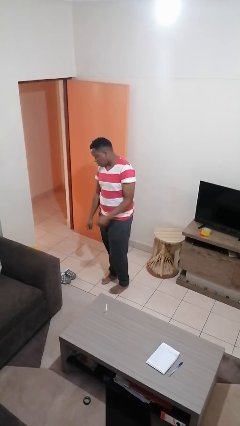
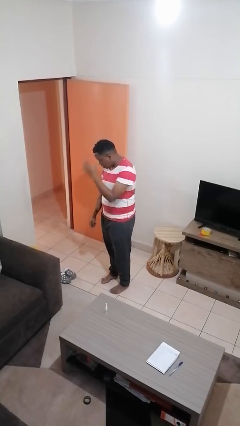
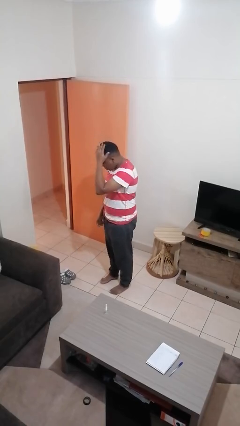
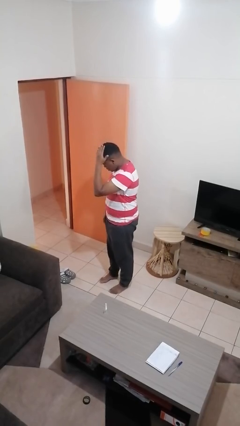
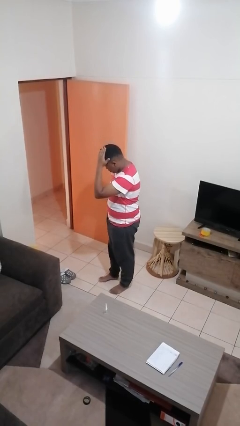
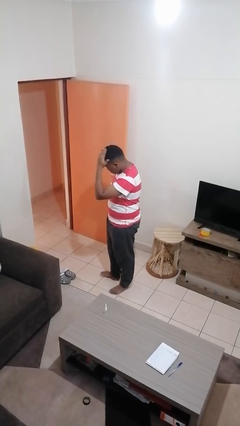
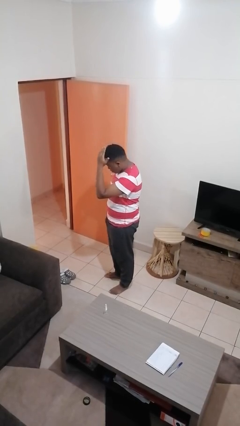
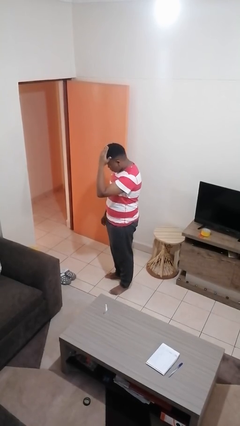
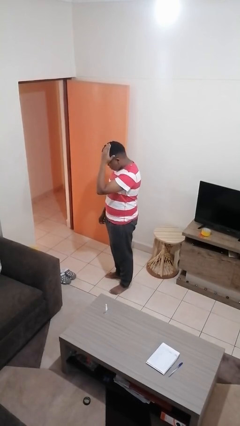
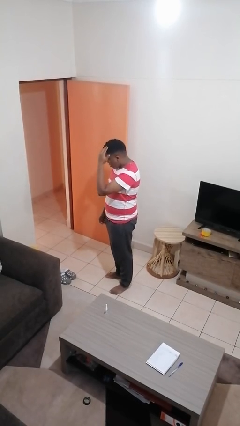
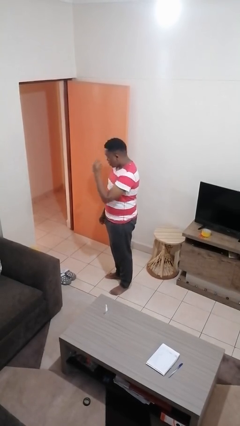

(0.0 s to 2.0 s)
person pats head

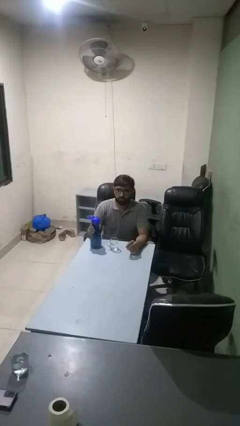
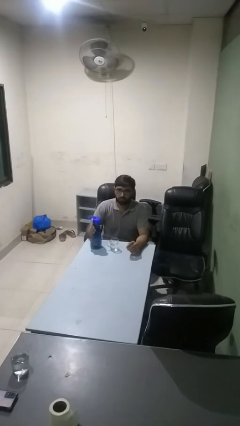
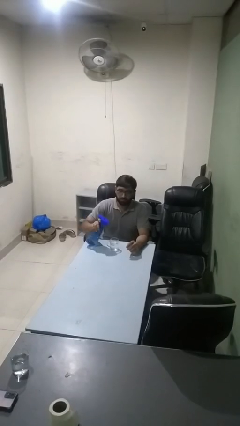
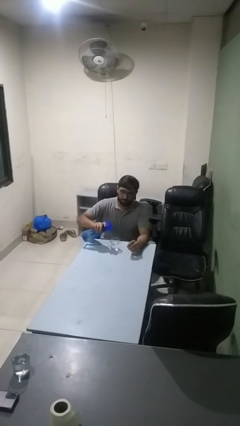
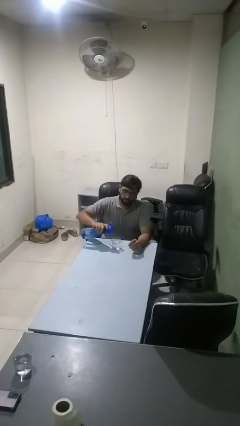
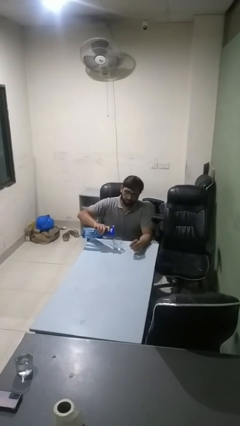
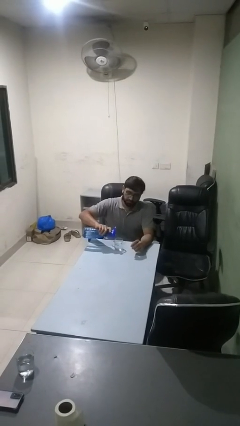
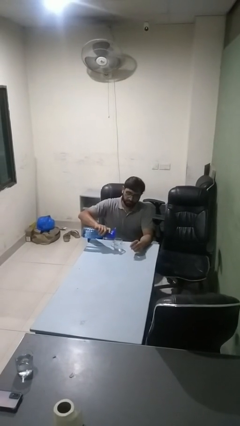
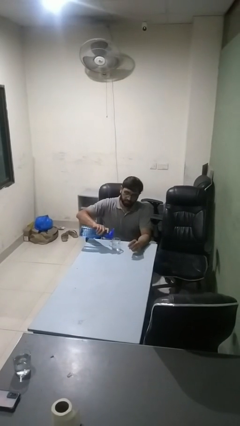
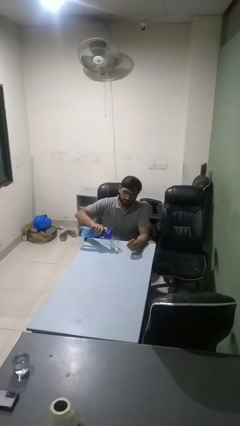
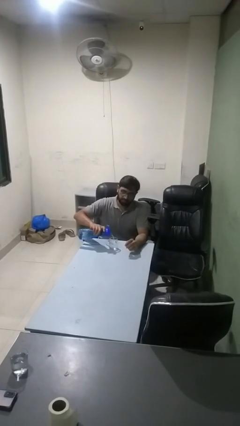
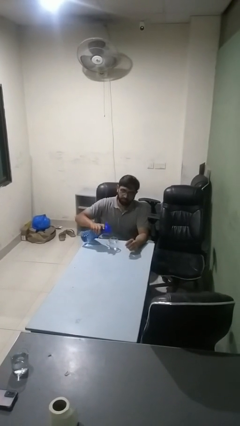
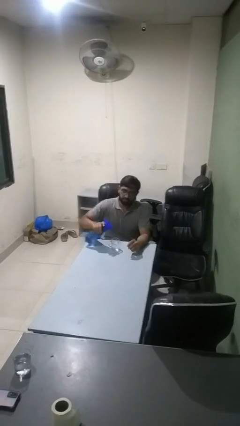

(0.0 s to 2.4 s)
person pours liquid into cup

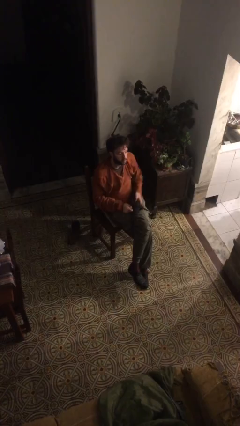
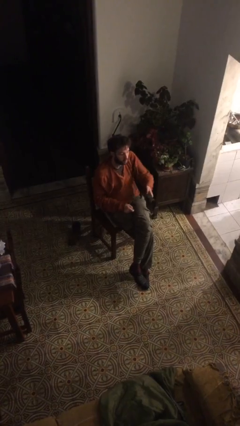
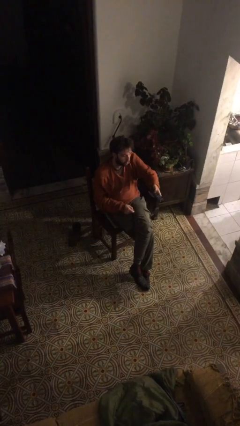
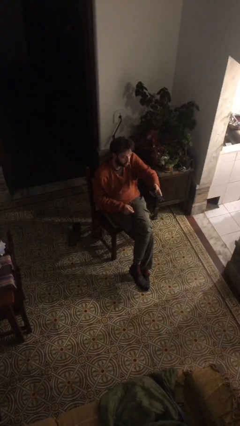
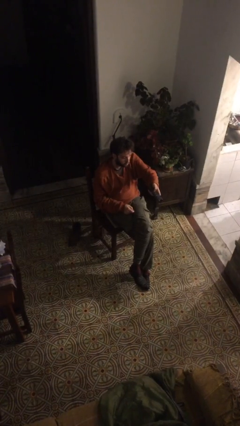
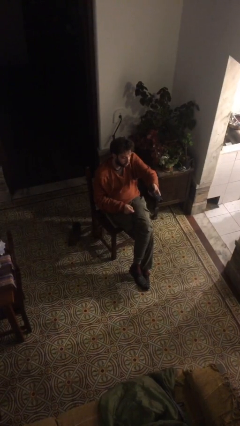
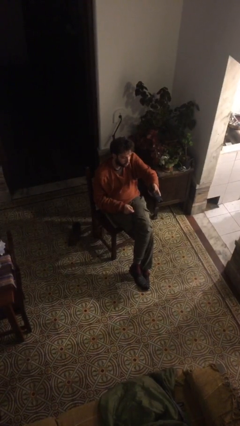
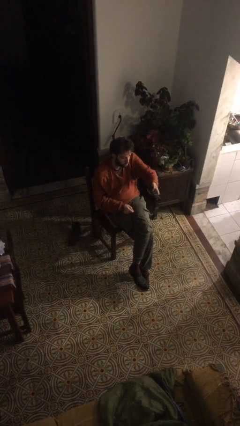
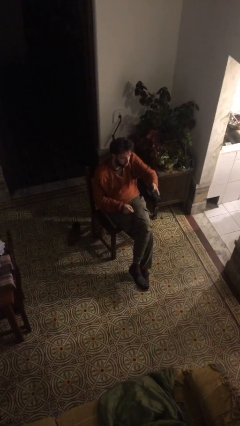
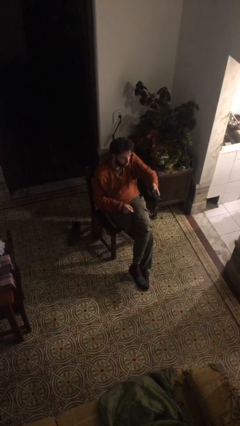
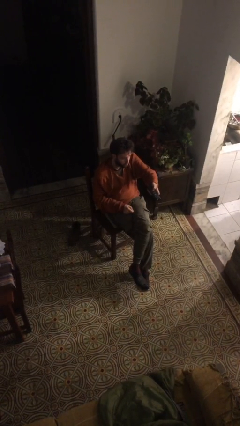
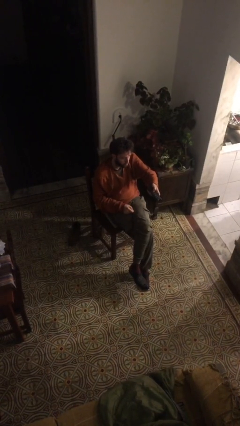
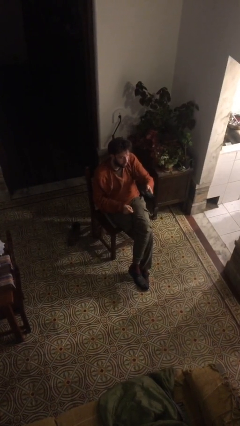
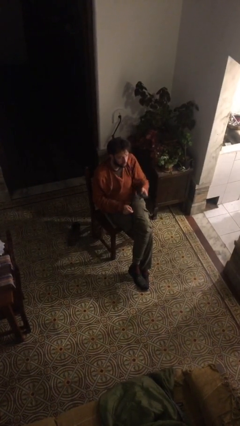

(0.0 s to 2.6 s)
person uses television remote

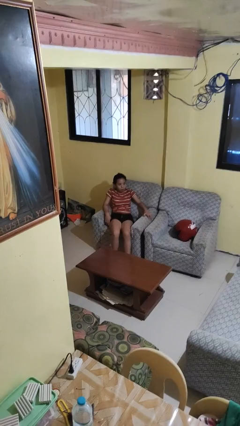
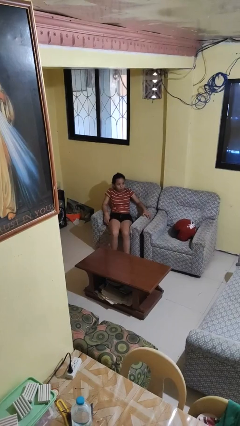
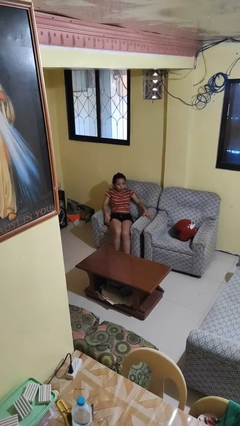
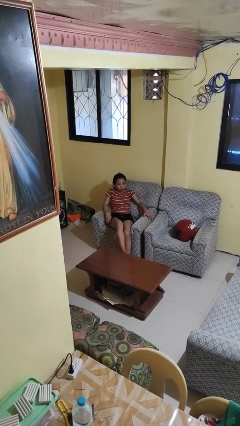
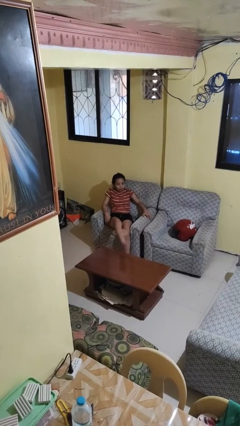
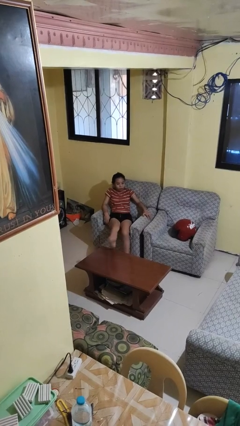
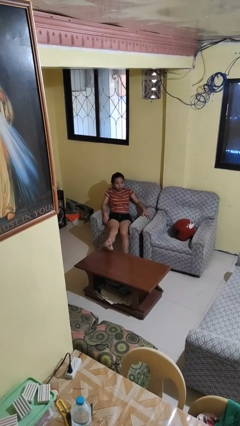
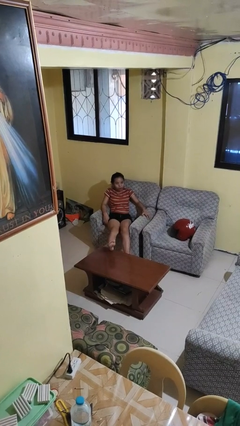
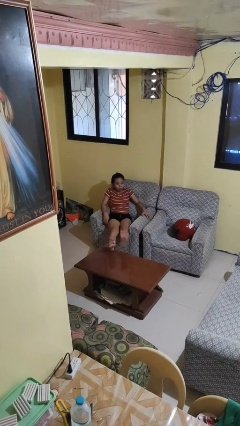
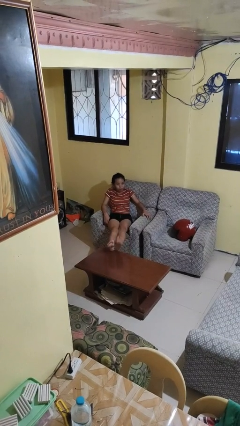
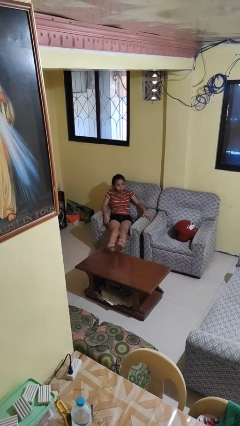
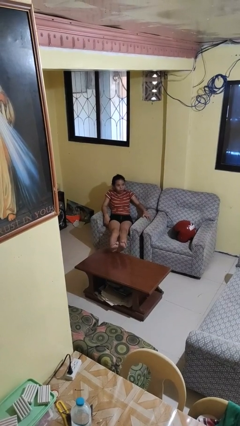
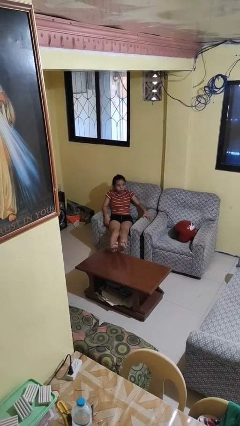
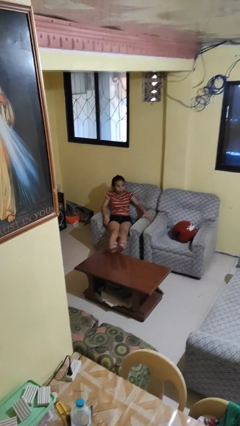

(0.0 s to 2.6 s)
person puts feet up

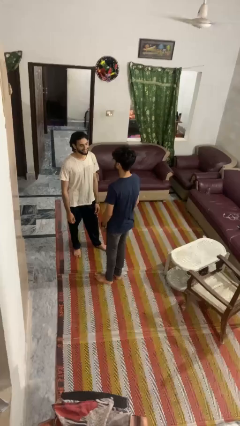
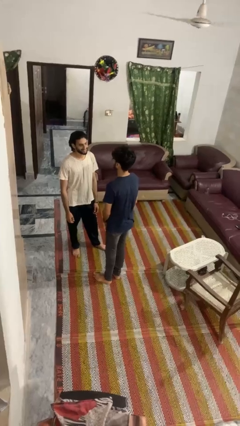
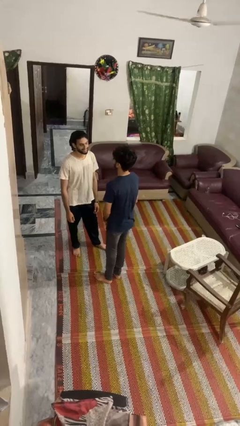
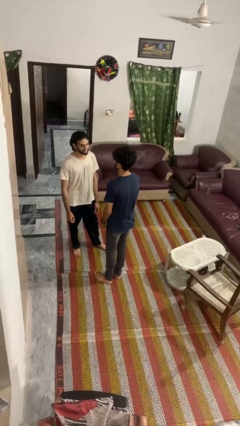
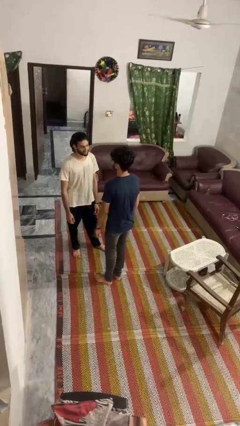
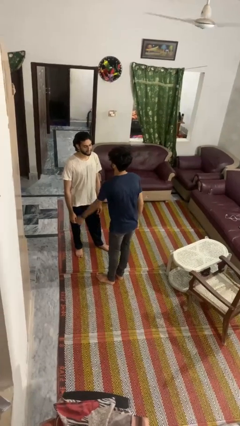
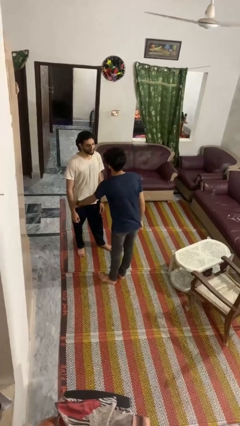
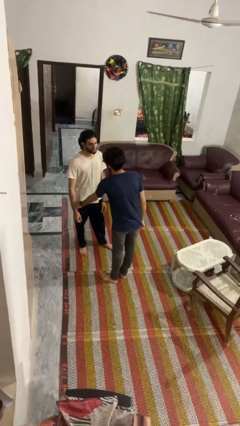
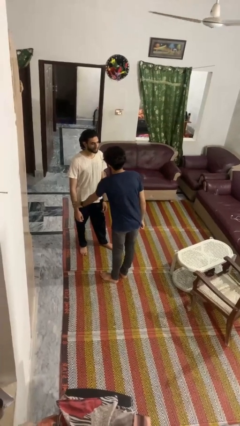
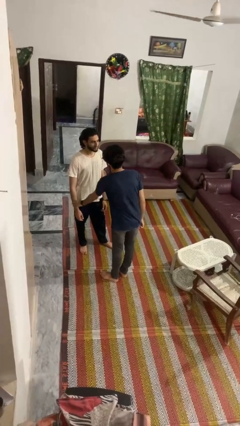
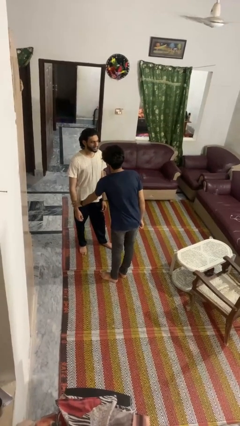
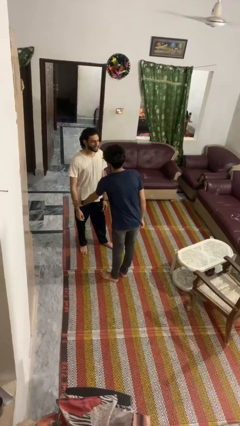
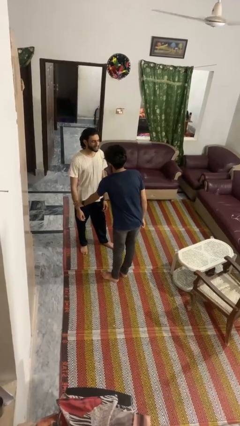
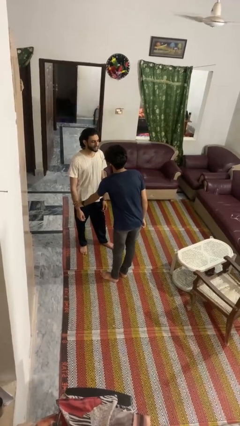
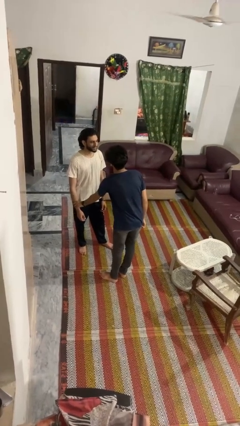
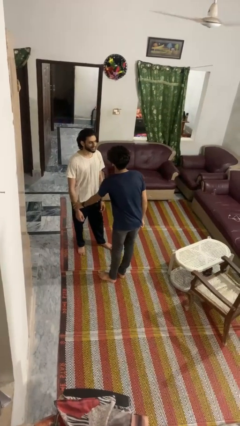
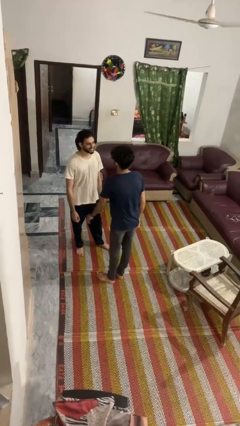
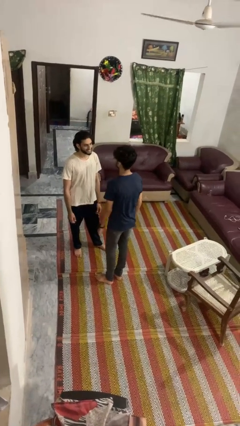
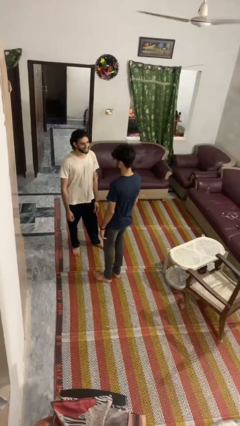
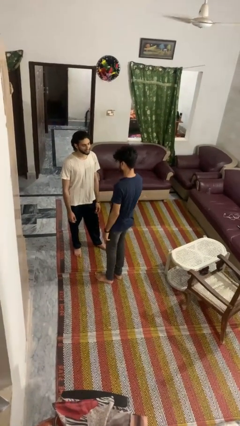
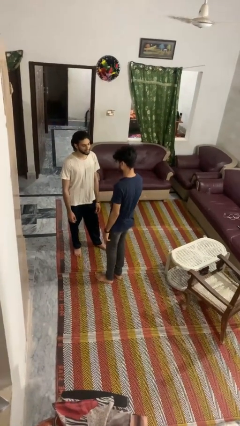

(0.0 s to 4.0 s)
person grabs person by forearm

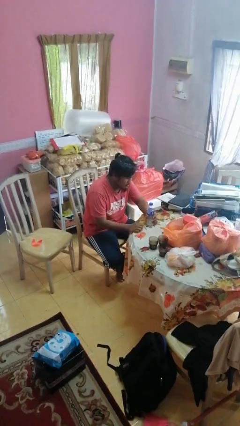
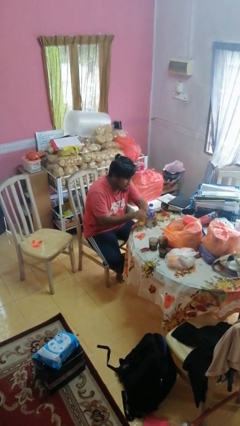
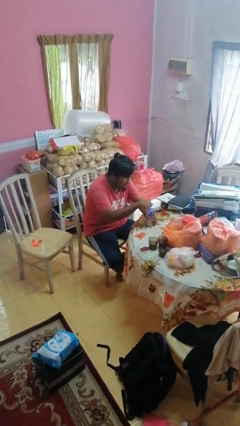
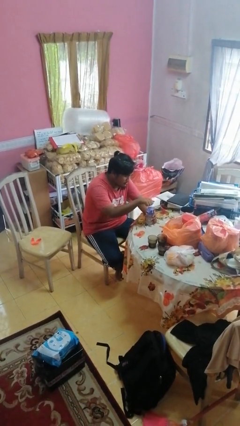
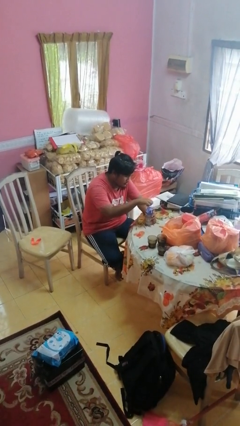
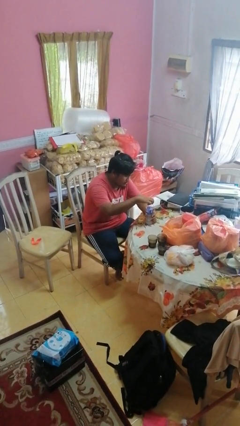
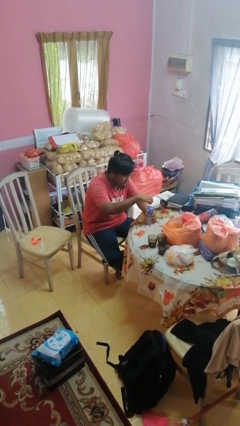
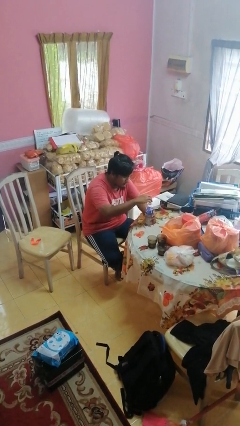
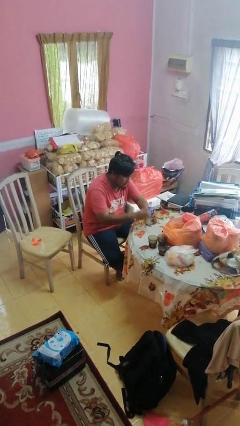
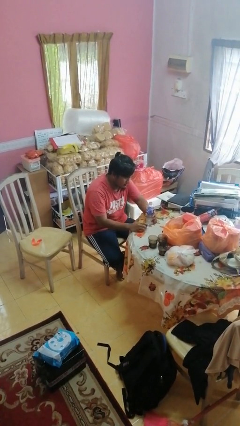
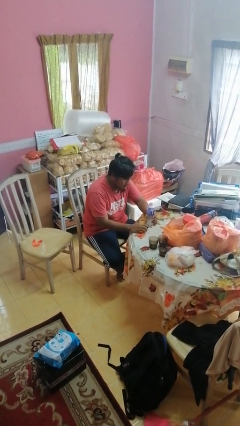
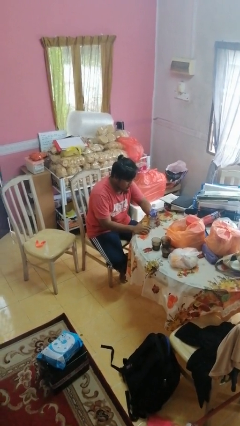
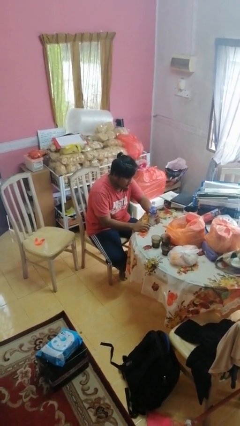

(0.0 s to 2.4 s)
person unscrews lid from bottle

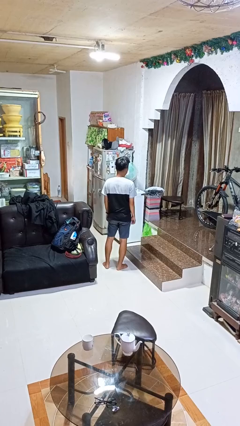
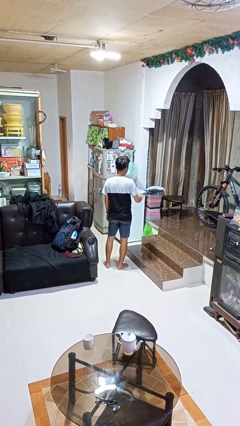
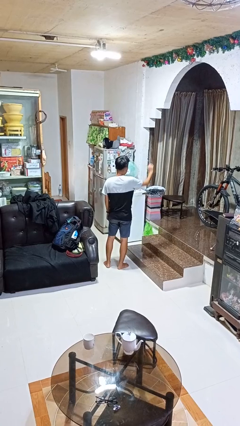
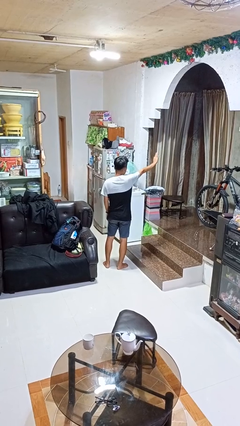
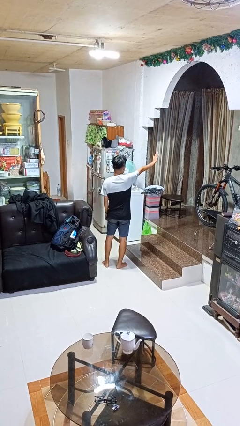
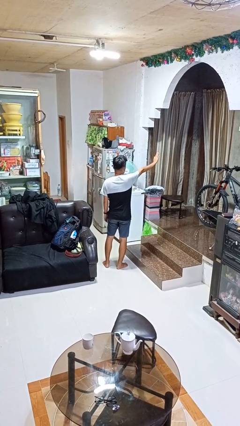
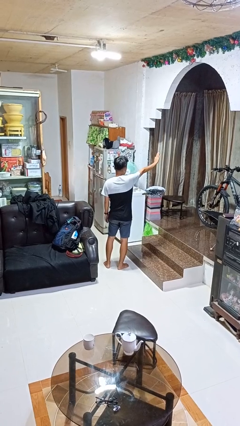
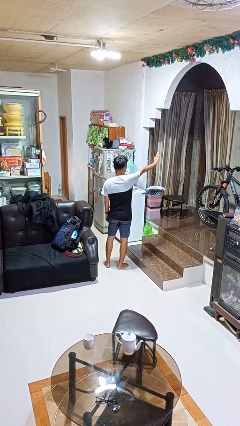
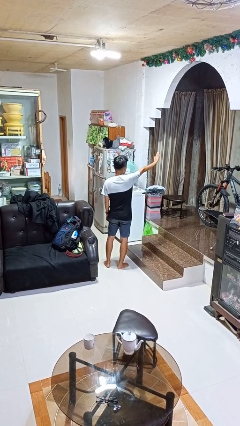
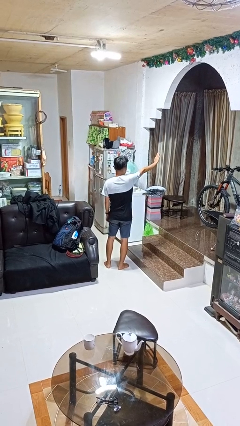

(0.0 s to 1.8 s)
person gestures stop
